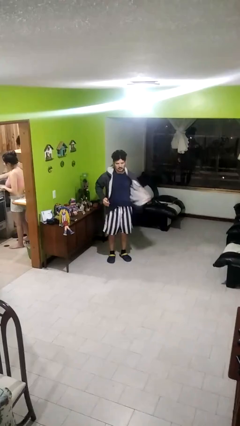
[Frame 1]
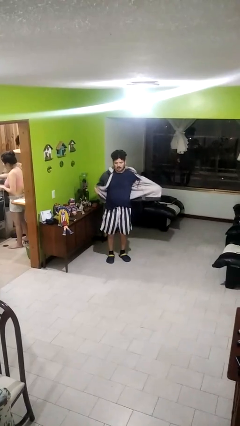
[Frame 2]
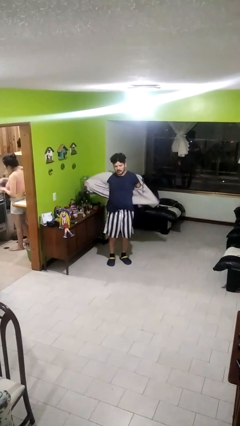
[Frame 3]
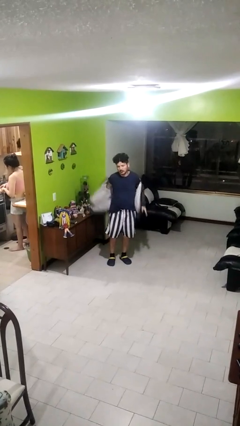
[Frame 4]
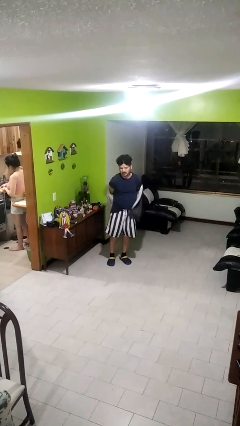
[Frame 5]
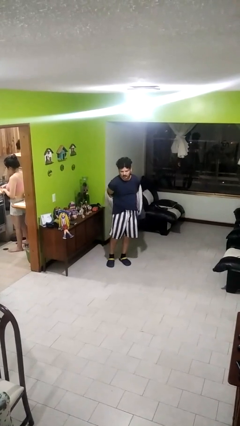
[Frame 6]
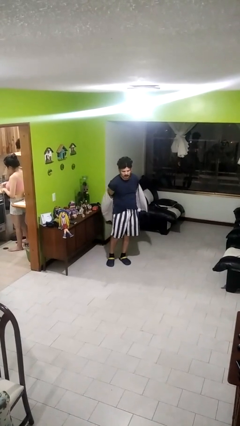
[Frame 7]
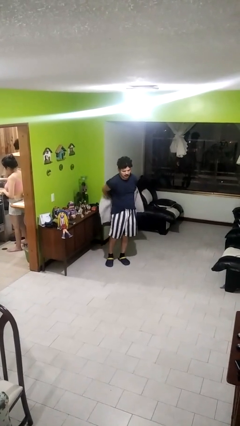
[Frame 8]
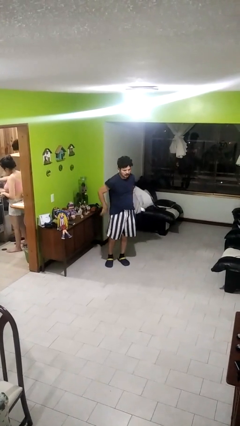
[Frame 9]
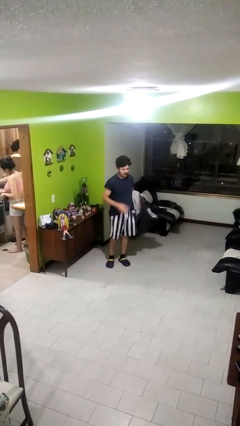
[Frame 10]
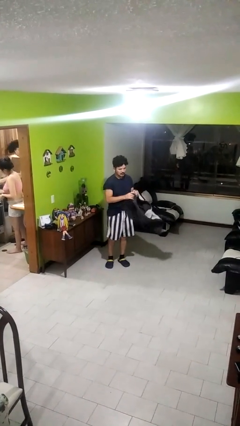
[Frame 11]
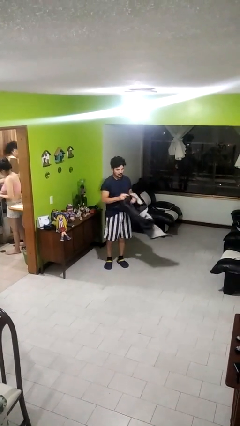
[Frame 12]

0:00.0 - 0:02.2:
person takes off jacket

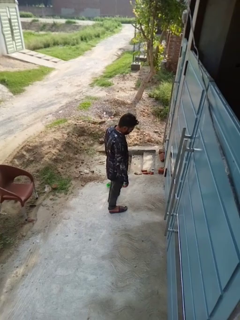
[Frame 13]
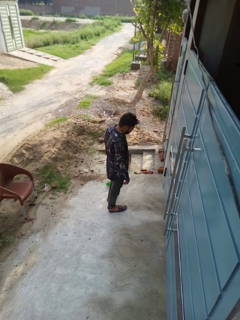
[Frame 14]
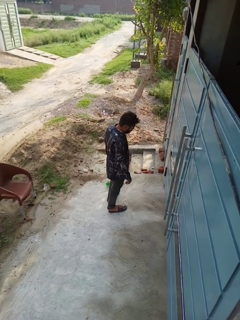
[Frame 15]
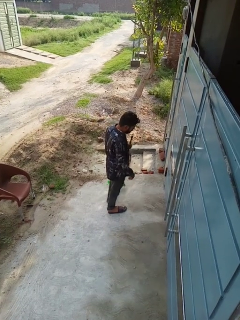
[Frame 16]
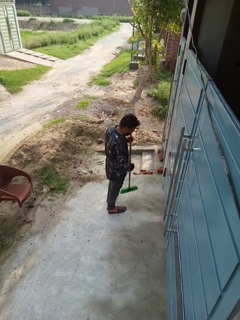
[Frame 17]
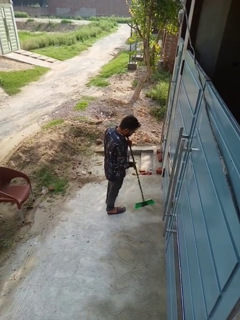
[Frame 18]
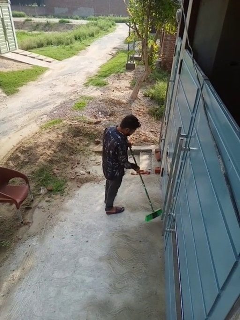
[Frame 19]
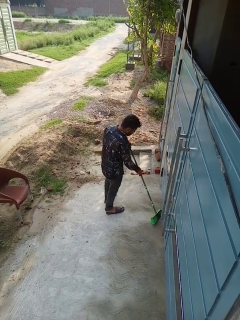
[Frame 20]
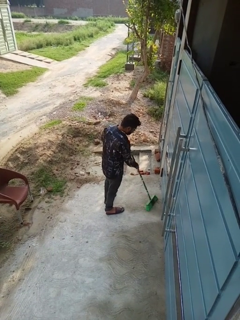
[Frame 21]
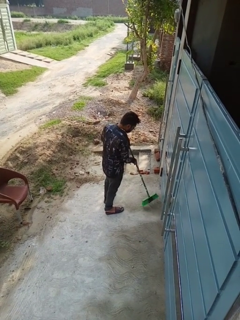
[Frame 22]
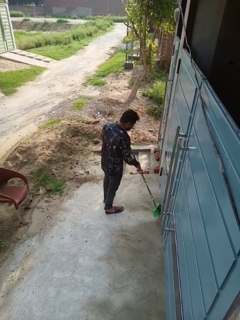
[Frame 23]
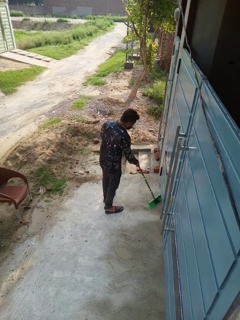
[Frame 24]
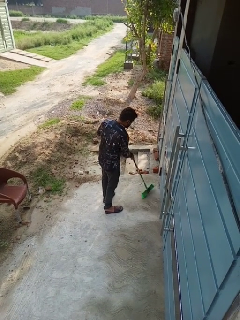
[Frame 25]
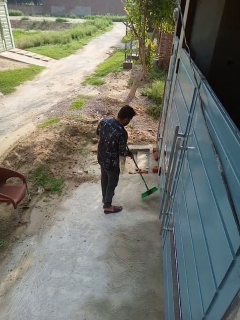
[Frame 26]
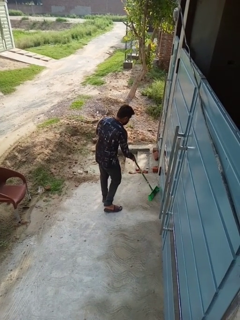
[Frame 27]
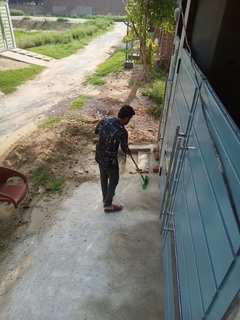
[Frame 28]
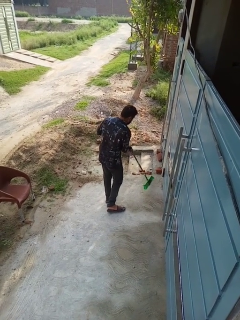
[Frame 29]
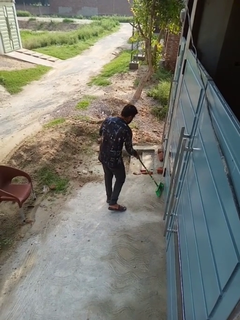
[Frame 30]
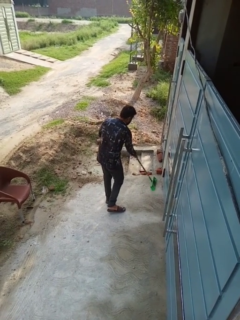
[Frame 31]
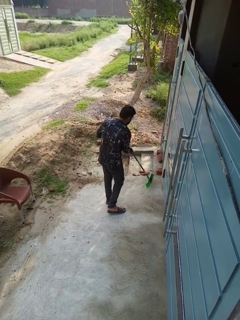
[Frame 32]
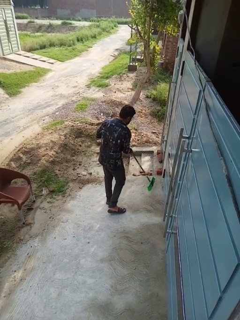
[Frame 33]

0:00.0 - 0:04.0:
person sweeps floor

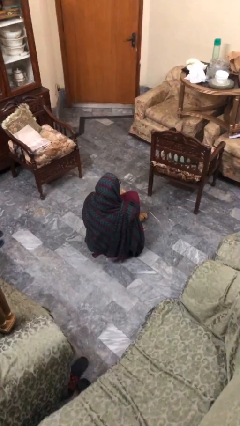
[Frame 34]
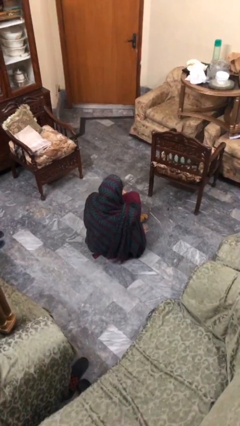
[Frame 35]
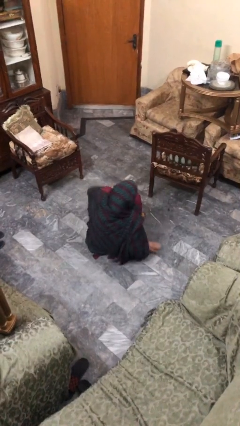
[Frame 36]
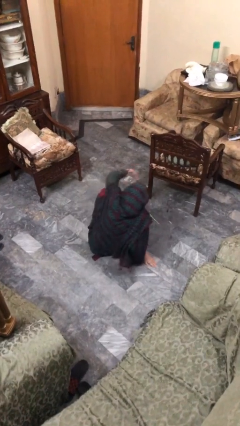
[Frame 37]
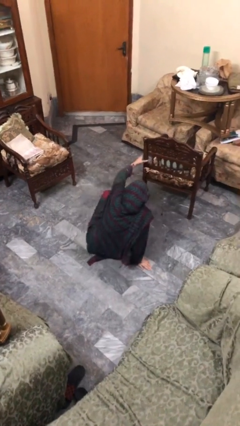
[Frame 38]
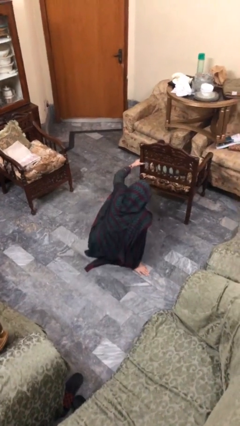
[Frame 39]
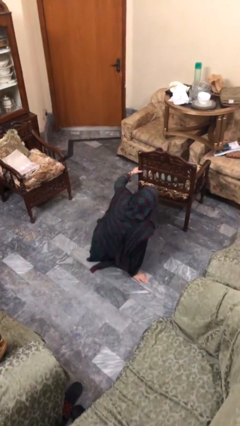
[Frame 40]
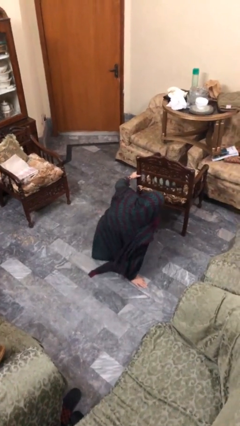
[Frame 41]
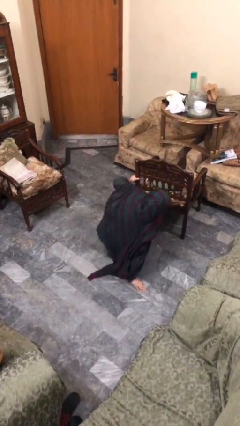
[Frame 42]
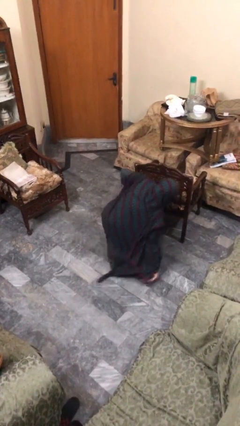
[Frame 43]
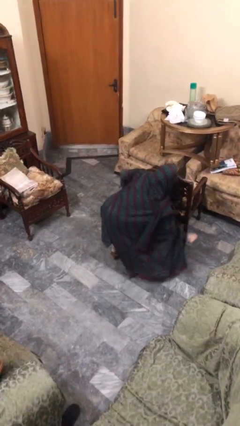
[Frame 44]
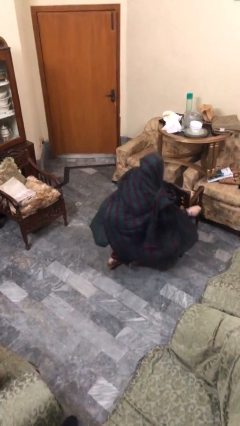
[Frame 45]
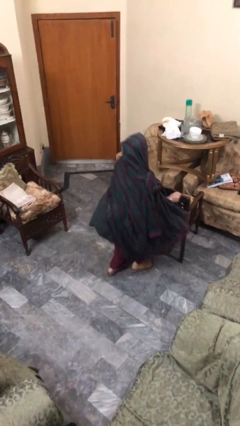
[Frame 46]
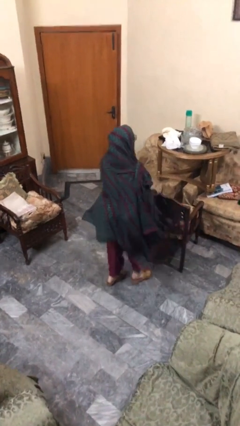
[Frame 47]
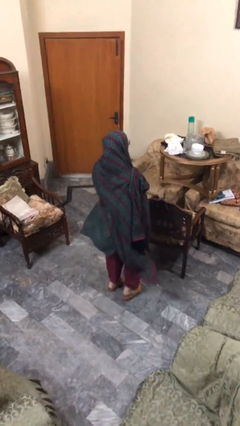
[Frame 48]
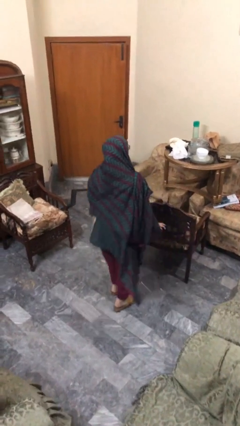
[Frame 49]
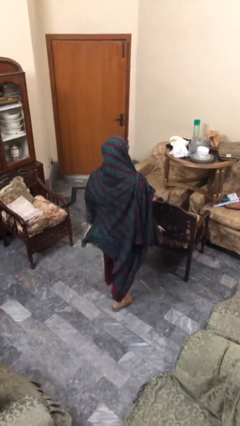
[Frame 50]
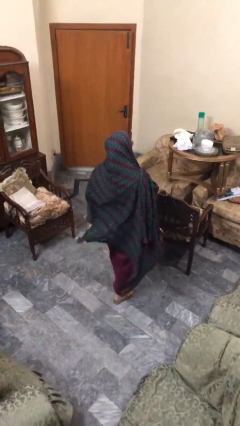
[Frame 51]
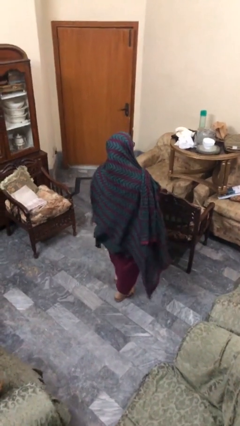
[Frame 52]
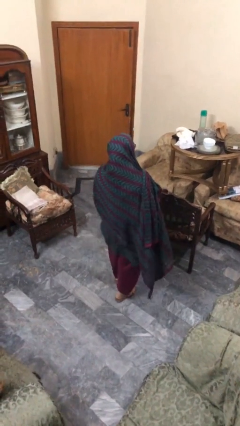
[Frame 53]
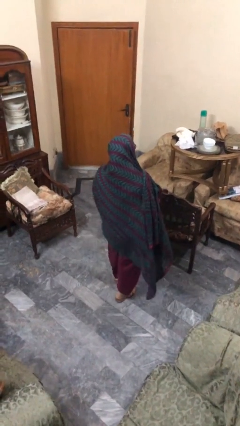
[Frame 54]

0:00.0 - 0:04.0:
person stands up from floor

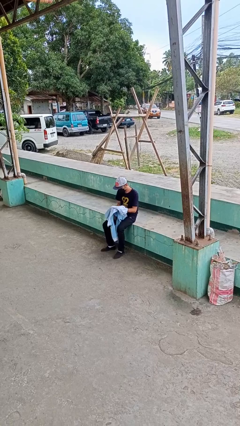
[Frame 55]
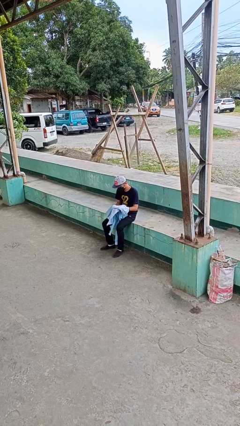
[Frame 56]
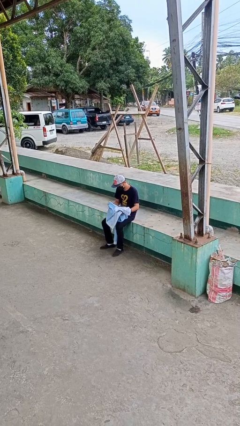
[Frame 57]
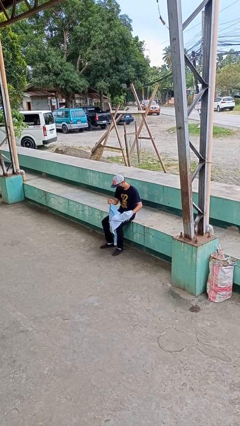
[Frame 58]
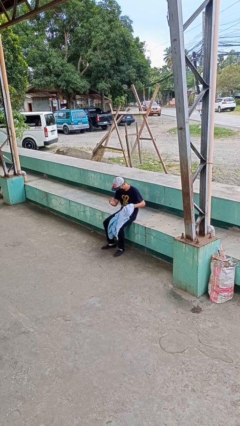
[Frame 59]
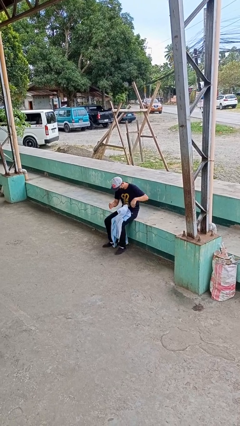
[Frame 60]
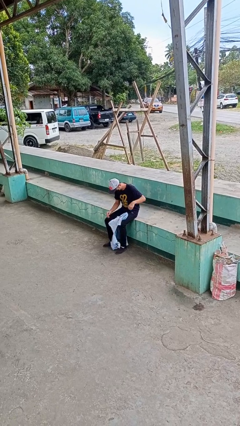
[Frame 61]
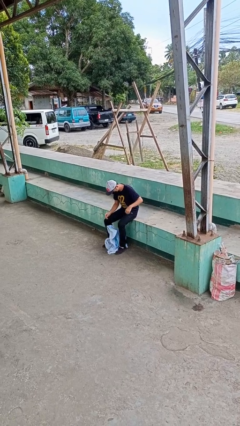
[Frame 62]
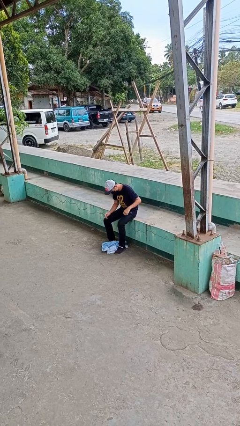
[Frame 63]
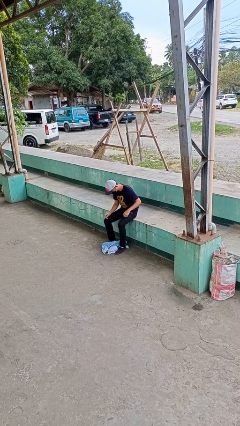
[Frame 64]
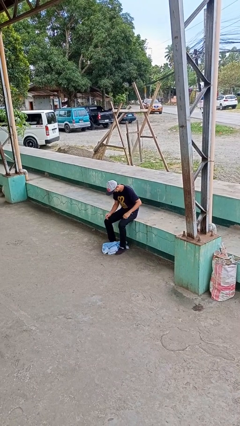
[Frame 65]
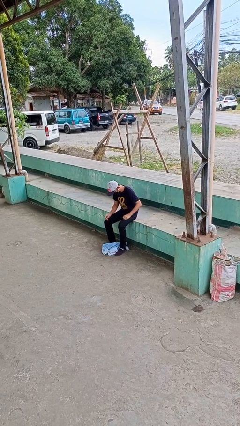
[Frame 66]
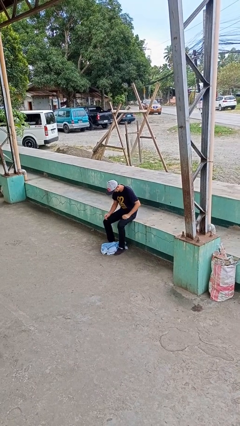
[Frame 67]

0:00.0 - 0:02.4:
person drops object

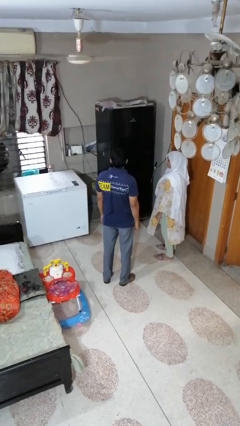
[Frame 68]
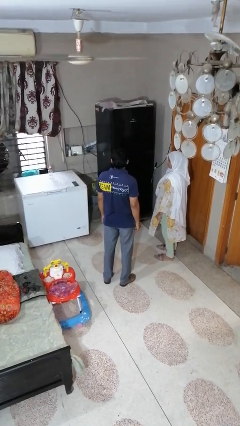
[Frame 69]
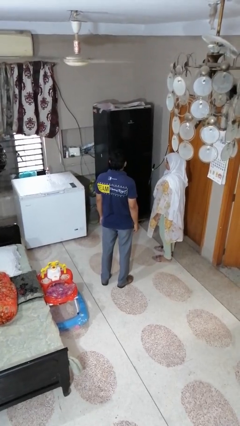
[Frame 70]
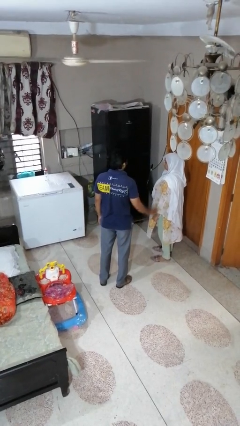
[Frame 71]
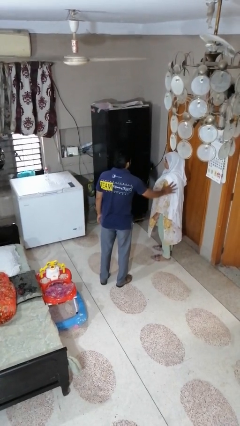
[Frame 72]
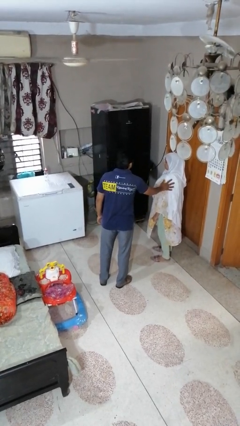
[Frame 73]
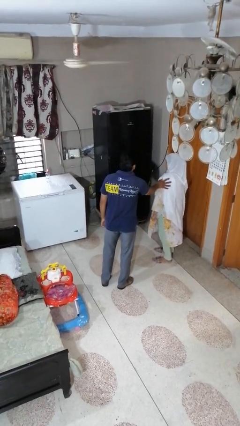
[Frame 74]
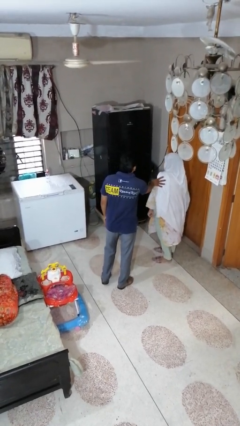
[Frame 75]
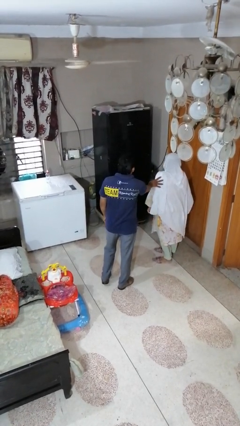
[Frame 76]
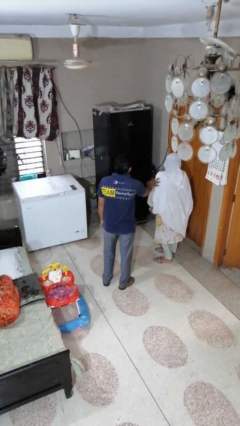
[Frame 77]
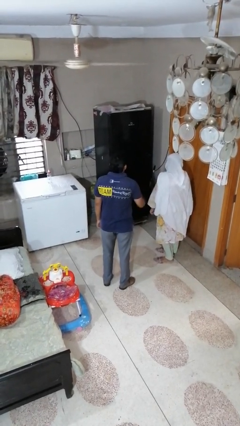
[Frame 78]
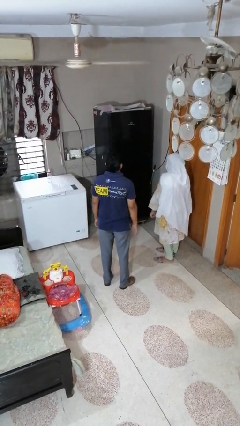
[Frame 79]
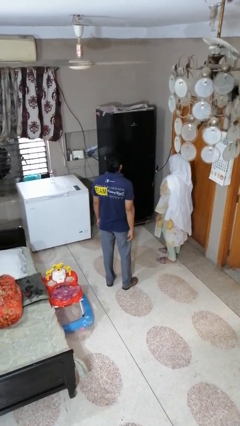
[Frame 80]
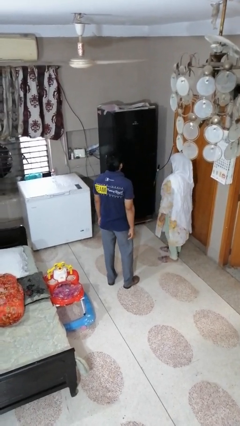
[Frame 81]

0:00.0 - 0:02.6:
person shoves person

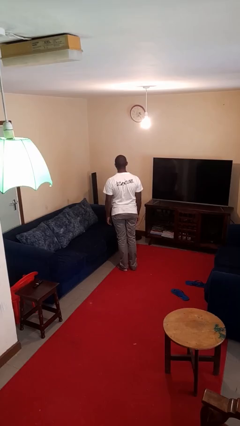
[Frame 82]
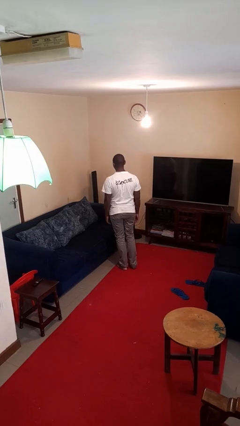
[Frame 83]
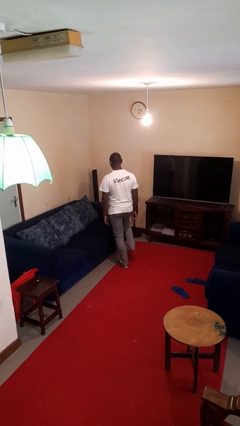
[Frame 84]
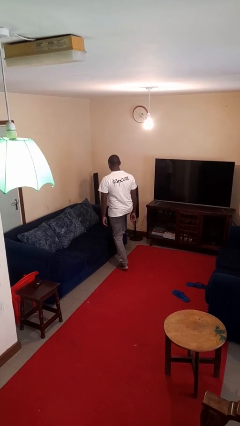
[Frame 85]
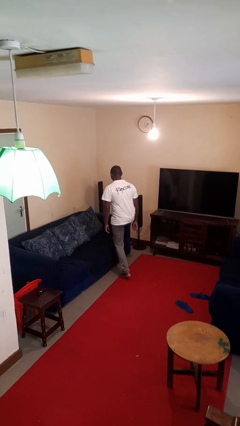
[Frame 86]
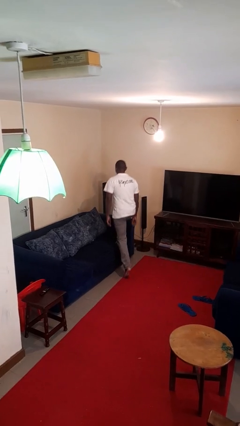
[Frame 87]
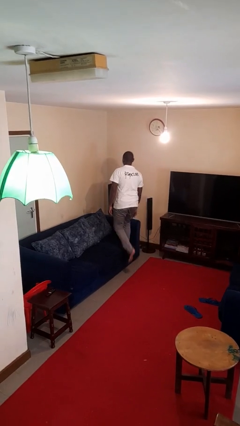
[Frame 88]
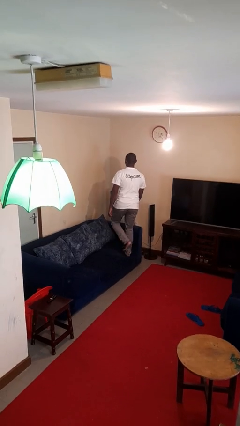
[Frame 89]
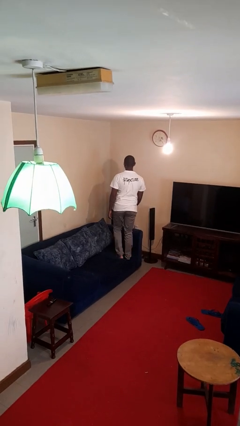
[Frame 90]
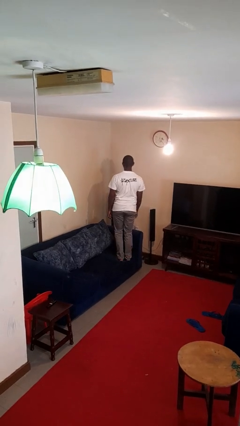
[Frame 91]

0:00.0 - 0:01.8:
person climbs on couch

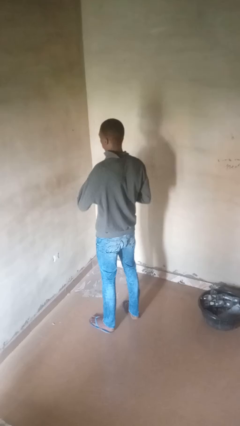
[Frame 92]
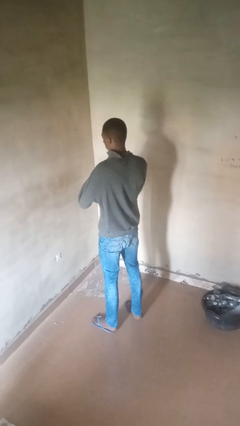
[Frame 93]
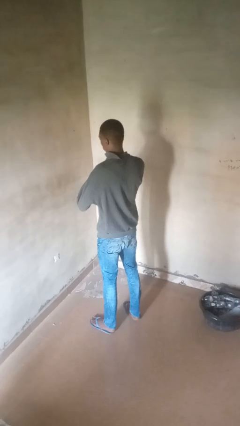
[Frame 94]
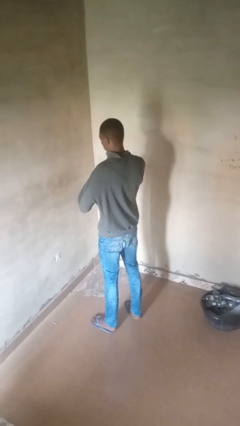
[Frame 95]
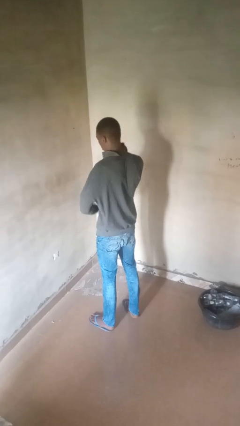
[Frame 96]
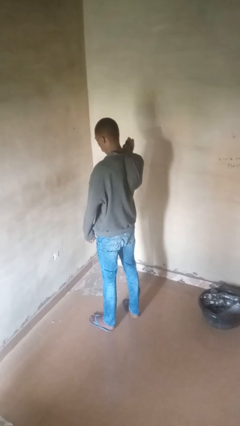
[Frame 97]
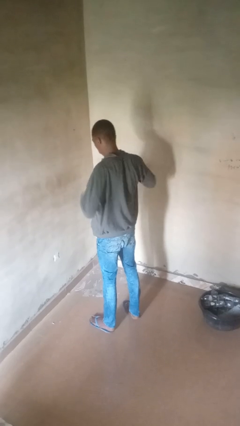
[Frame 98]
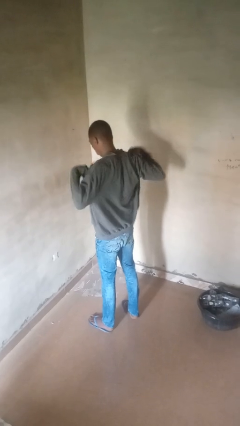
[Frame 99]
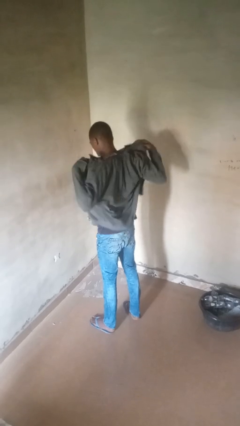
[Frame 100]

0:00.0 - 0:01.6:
person unzips jacket
